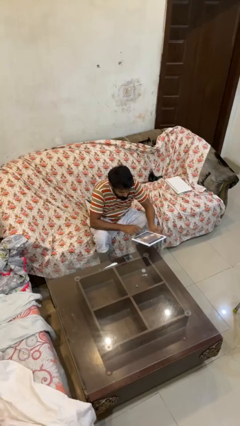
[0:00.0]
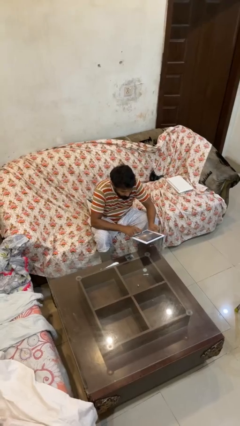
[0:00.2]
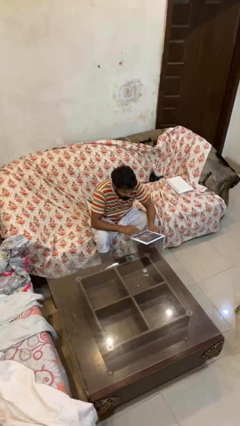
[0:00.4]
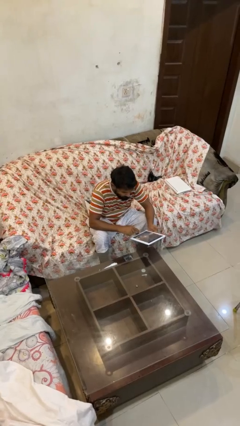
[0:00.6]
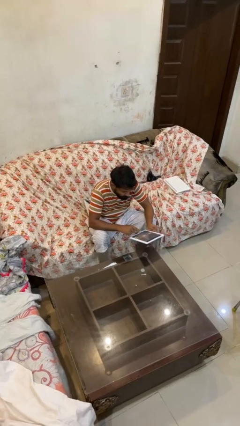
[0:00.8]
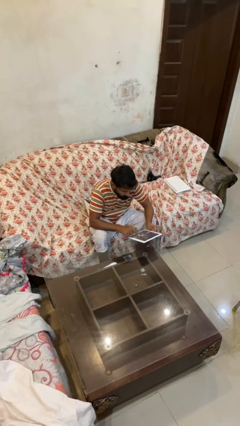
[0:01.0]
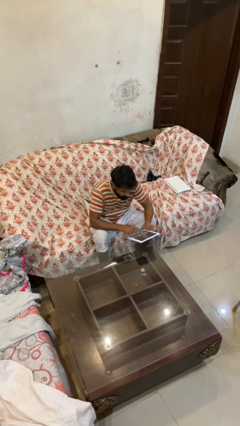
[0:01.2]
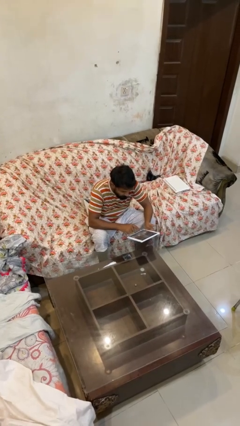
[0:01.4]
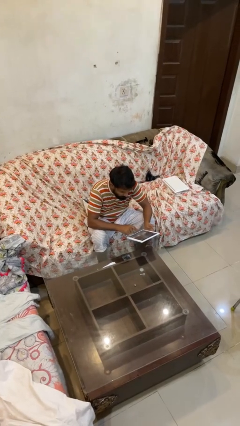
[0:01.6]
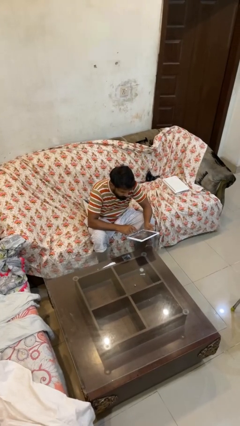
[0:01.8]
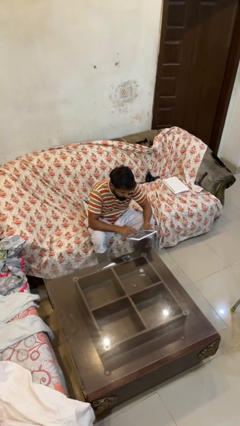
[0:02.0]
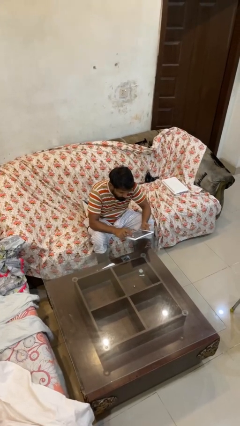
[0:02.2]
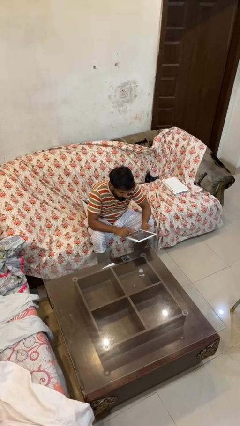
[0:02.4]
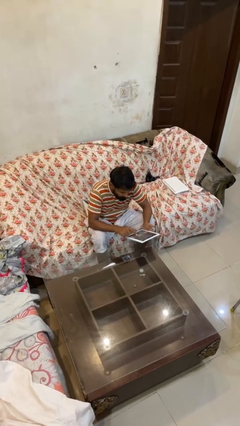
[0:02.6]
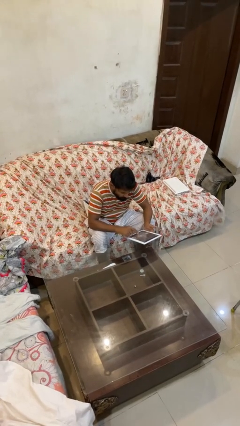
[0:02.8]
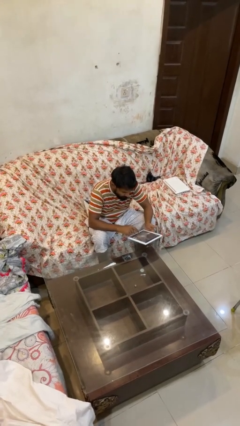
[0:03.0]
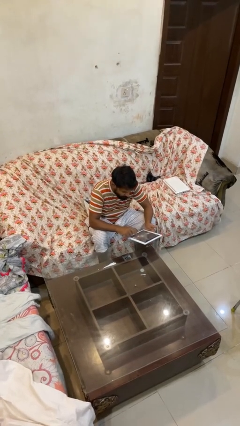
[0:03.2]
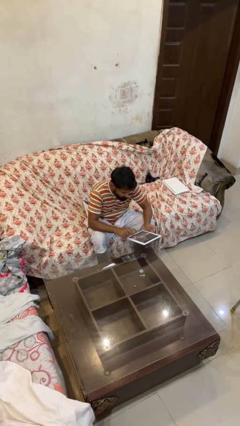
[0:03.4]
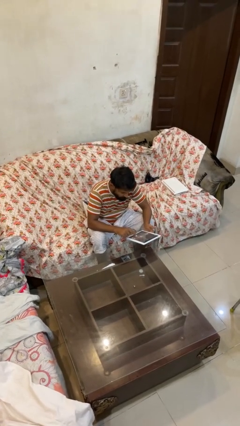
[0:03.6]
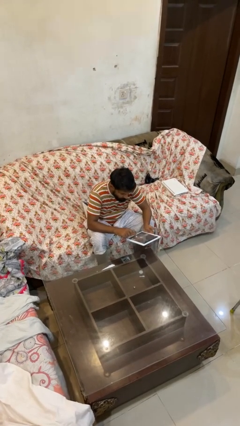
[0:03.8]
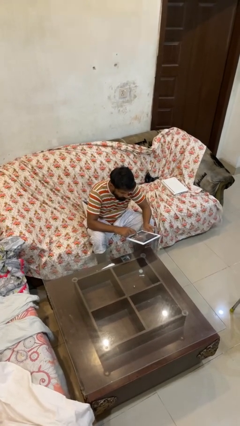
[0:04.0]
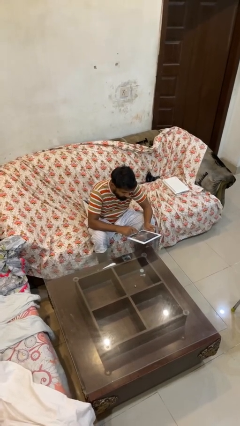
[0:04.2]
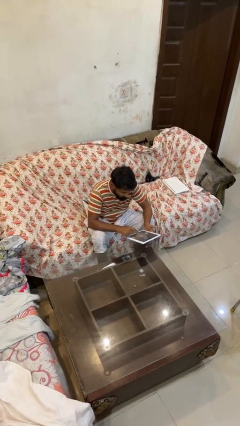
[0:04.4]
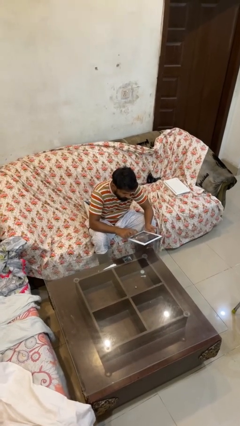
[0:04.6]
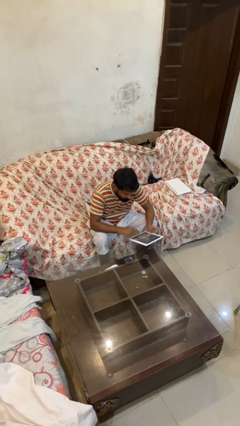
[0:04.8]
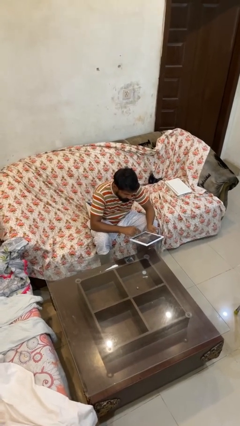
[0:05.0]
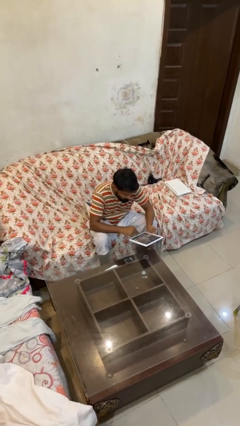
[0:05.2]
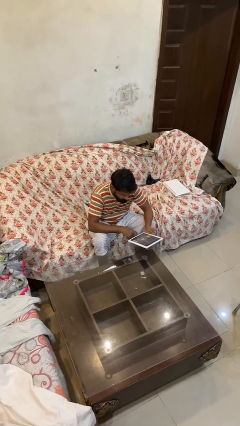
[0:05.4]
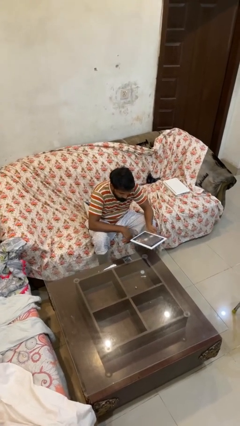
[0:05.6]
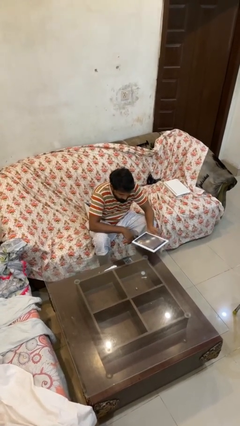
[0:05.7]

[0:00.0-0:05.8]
person interacts with tablet

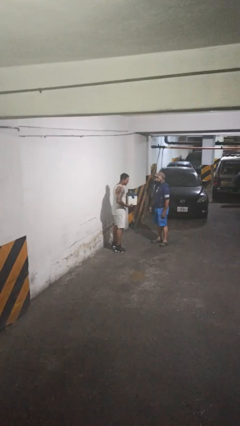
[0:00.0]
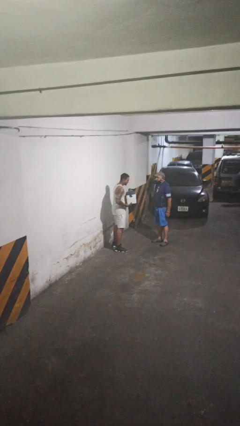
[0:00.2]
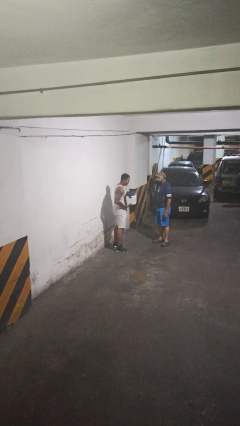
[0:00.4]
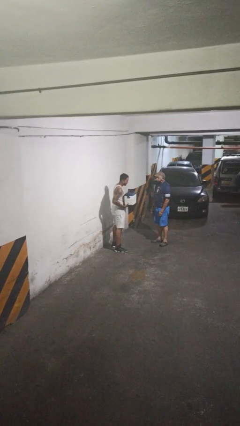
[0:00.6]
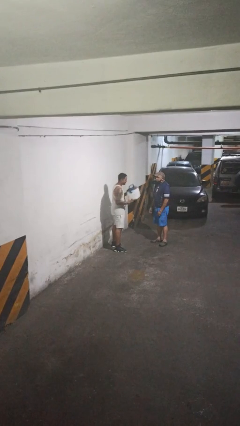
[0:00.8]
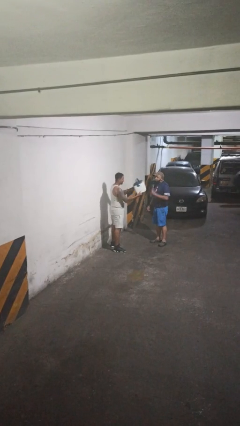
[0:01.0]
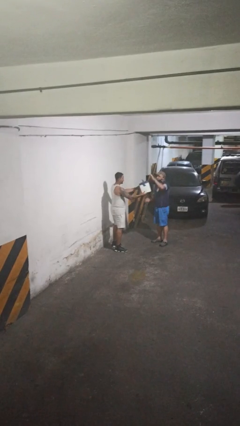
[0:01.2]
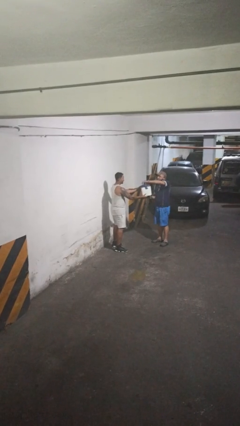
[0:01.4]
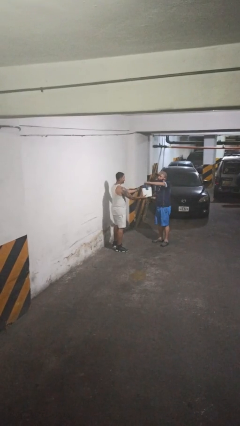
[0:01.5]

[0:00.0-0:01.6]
person transfers object to person

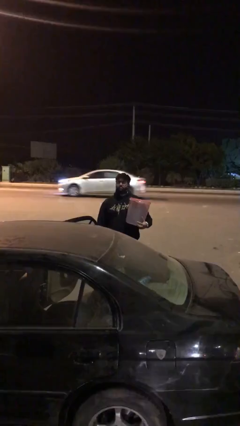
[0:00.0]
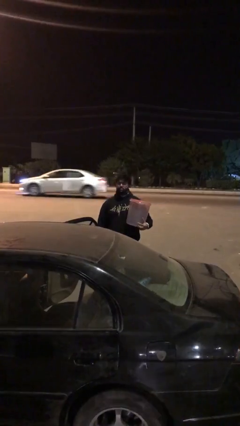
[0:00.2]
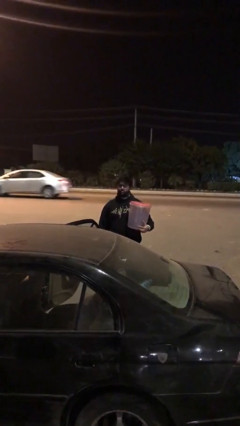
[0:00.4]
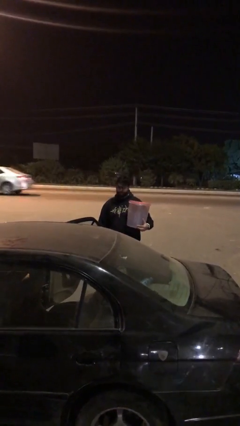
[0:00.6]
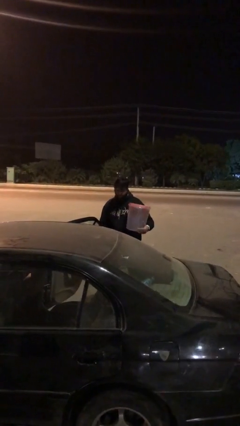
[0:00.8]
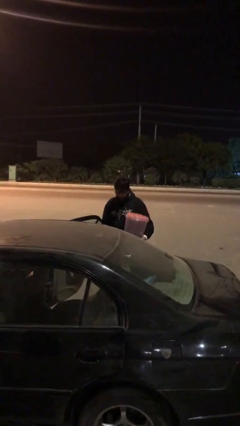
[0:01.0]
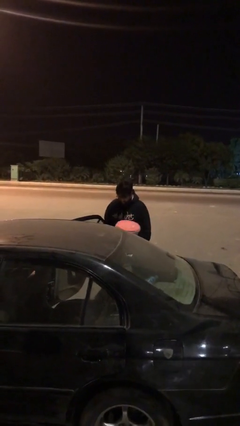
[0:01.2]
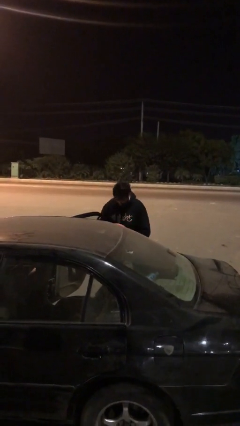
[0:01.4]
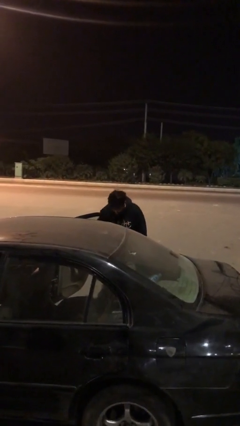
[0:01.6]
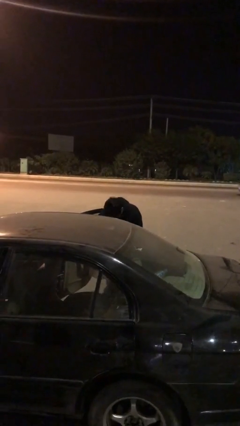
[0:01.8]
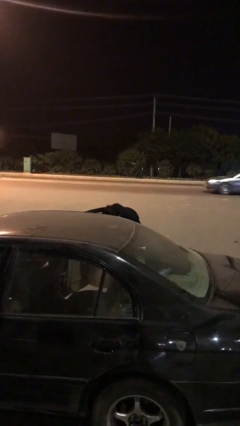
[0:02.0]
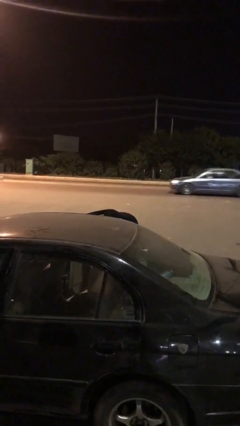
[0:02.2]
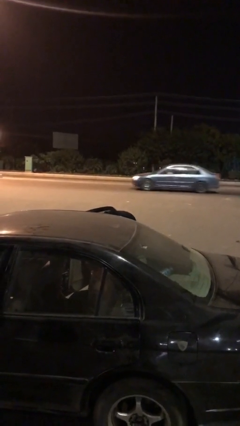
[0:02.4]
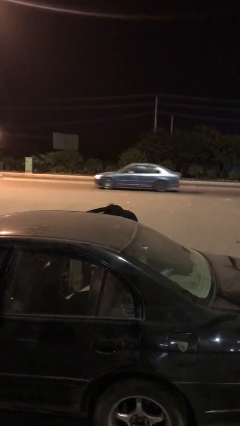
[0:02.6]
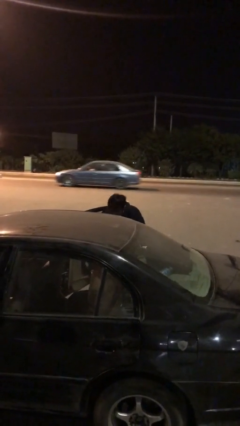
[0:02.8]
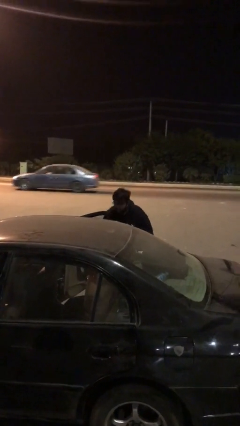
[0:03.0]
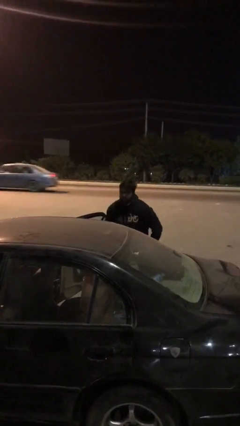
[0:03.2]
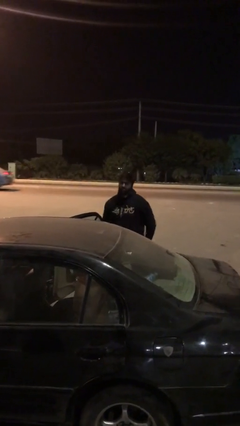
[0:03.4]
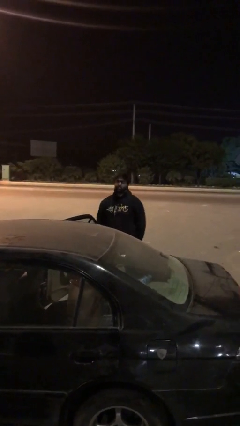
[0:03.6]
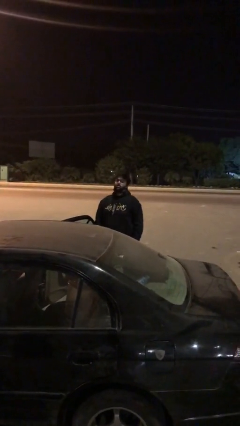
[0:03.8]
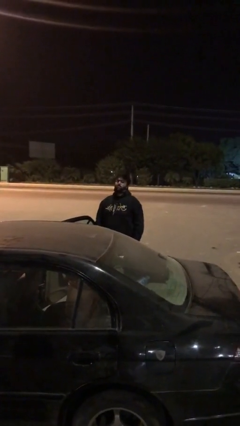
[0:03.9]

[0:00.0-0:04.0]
person loads car

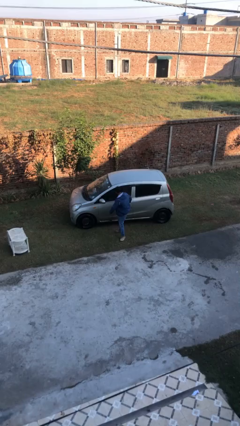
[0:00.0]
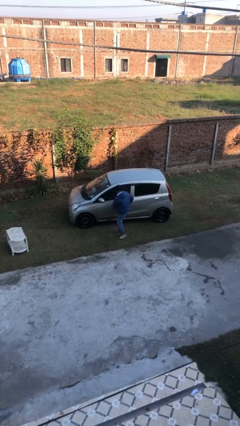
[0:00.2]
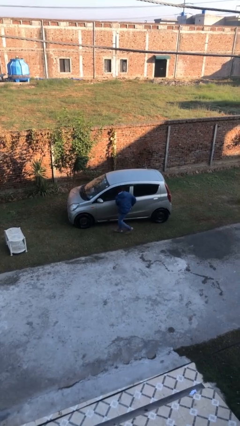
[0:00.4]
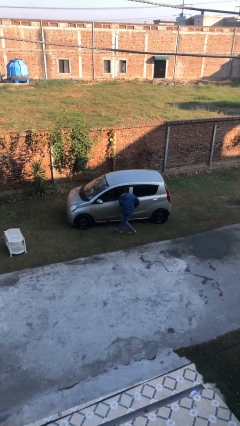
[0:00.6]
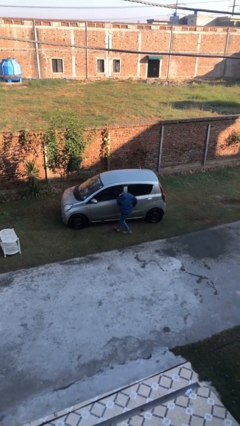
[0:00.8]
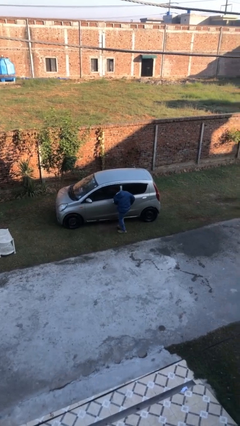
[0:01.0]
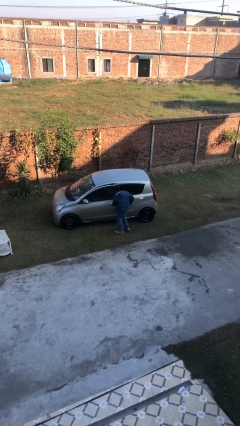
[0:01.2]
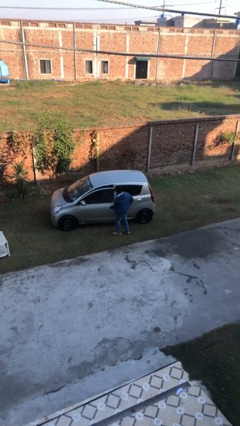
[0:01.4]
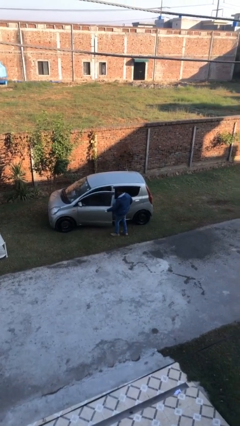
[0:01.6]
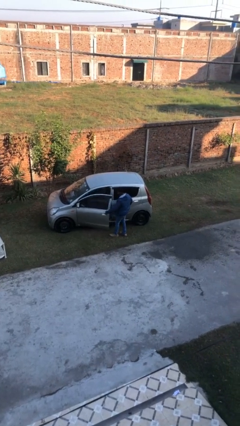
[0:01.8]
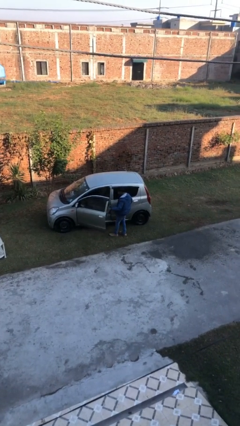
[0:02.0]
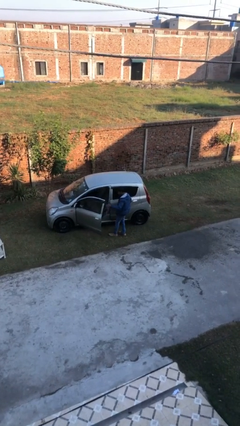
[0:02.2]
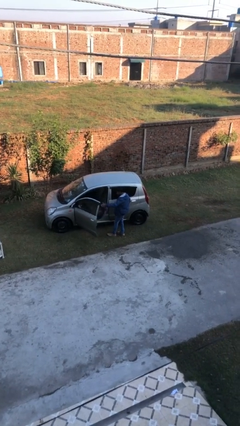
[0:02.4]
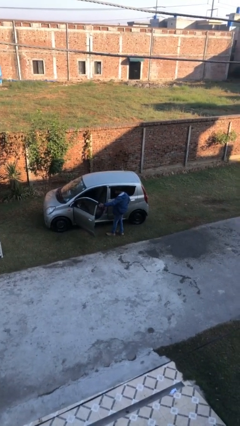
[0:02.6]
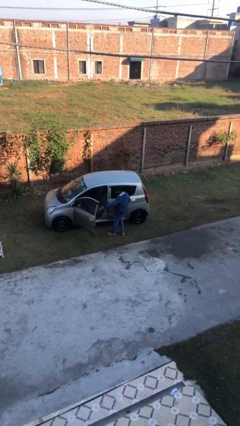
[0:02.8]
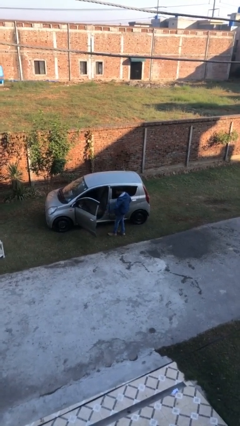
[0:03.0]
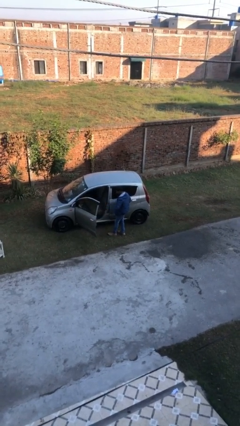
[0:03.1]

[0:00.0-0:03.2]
person opens car door

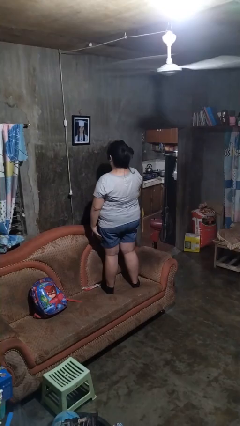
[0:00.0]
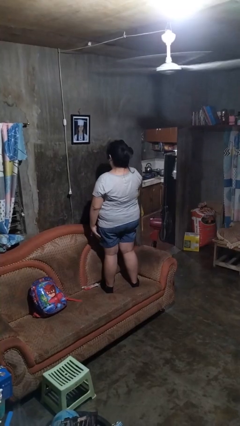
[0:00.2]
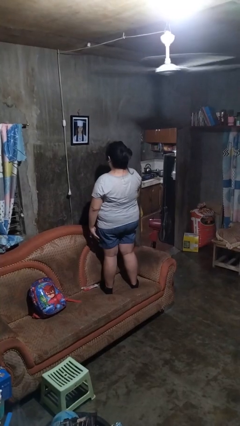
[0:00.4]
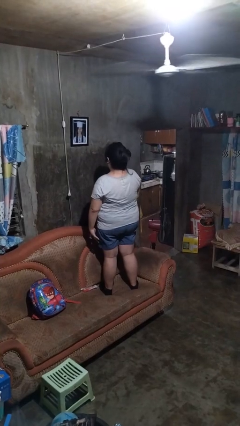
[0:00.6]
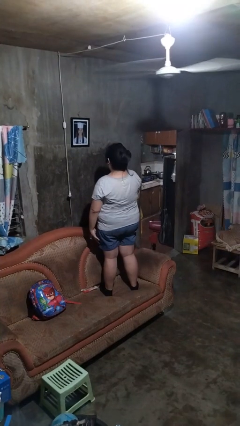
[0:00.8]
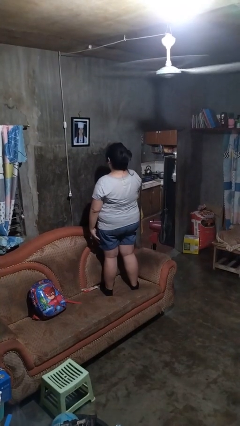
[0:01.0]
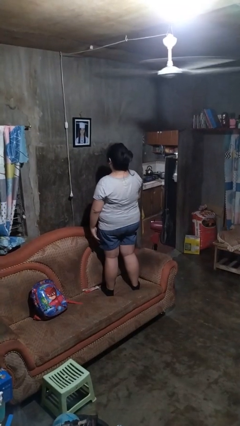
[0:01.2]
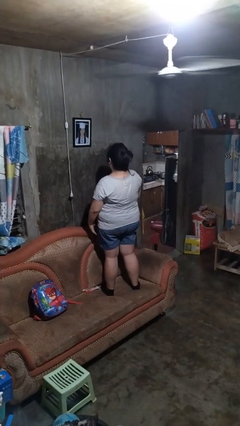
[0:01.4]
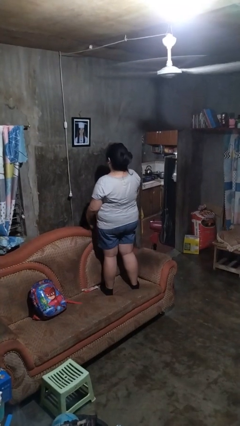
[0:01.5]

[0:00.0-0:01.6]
person takes down picture frame

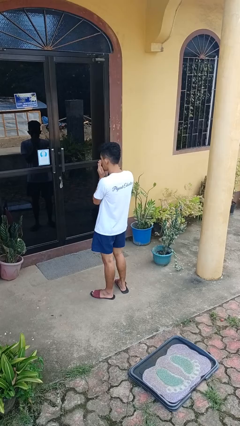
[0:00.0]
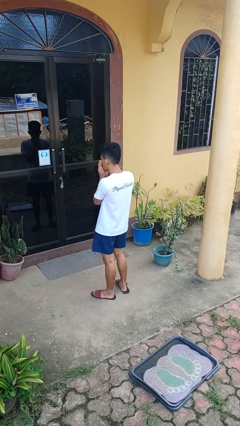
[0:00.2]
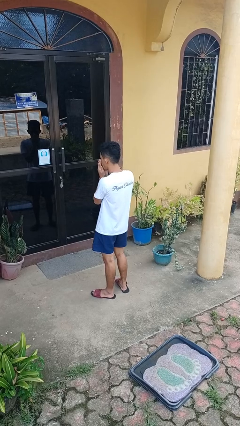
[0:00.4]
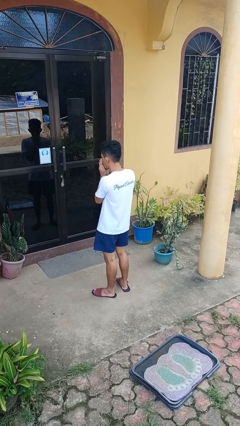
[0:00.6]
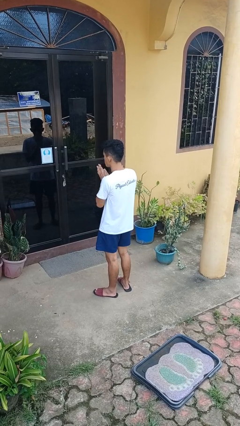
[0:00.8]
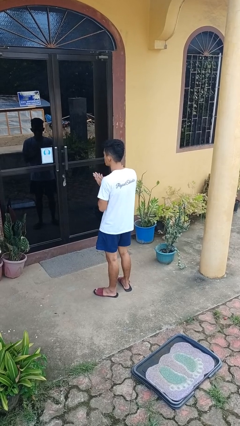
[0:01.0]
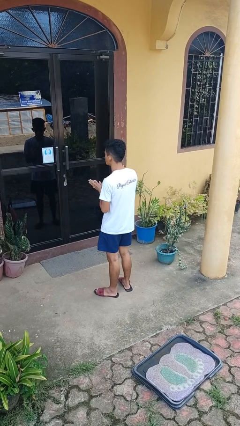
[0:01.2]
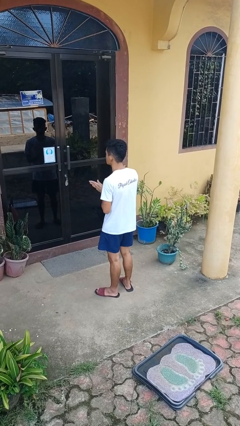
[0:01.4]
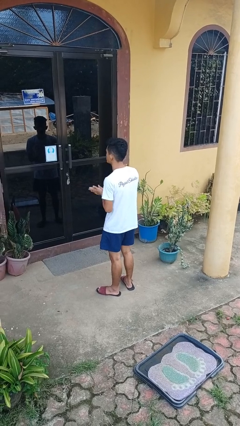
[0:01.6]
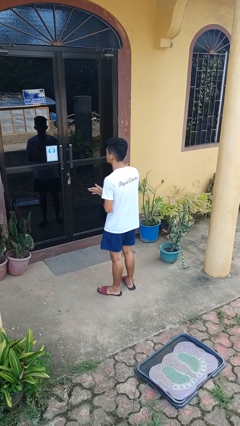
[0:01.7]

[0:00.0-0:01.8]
person blows into hands
